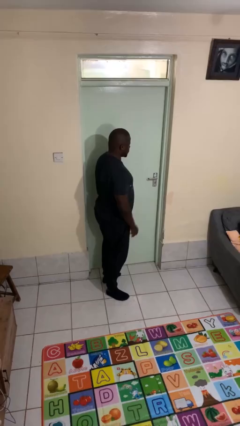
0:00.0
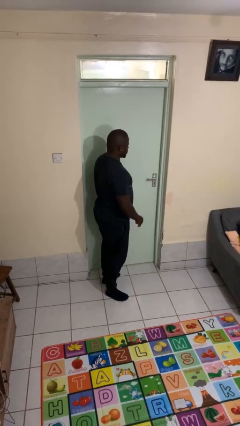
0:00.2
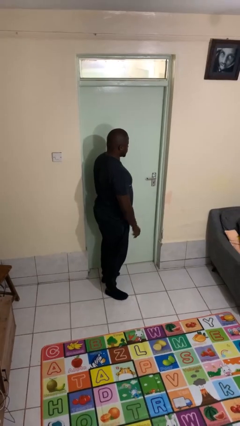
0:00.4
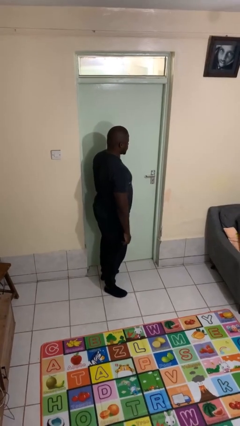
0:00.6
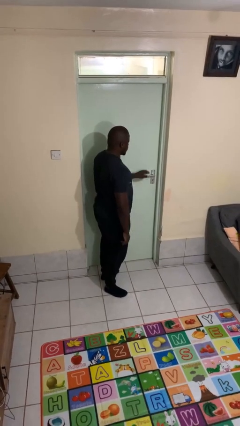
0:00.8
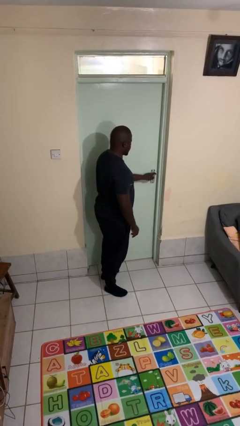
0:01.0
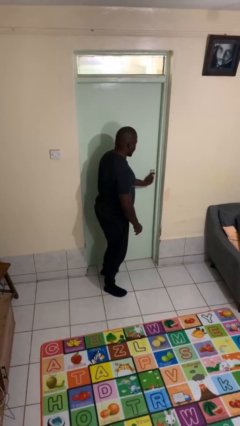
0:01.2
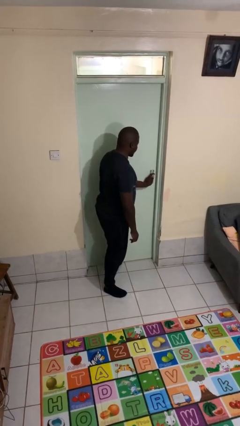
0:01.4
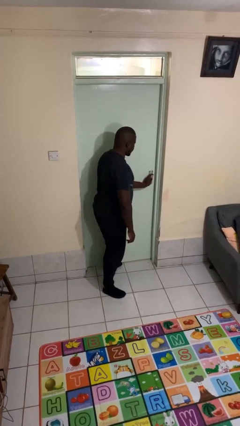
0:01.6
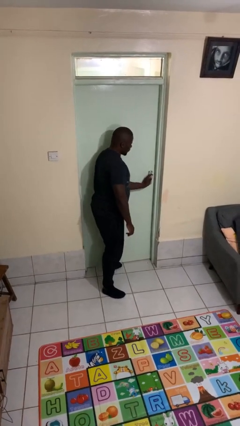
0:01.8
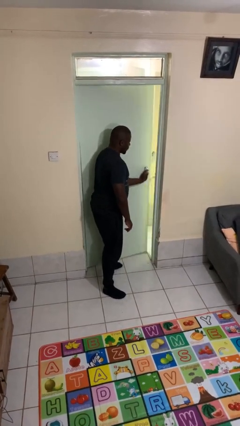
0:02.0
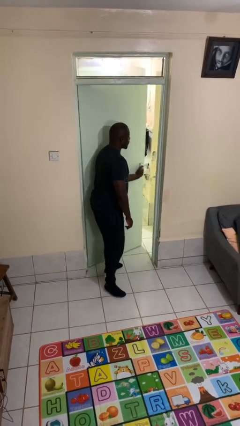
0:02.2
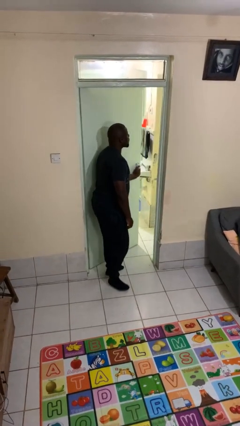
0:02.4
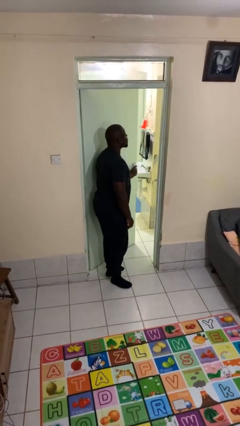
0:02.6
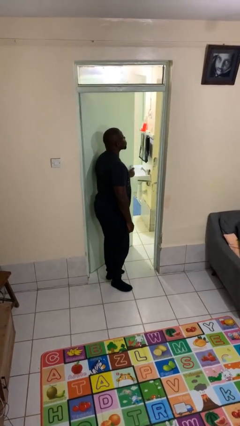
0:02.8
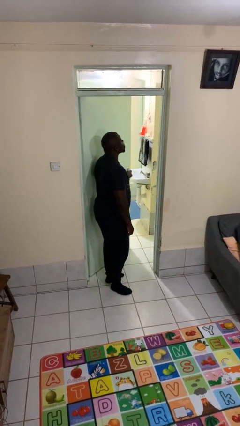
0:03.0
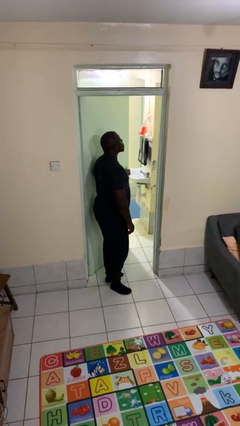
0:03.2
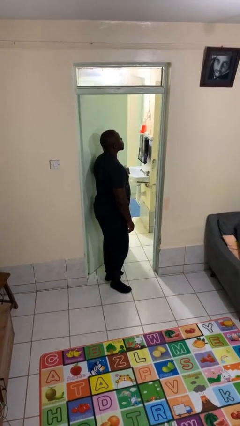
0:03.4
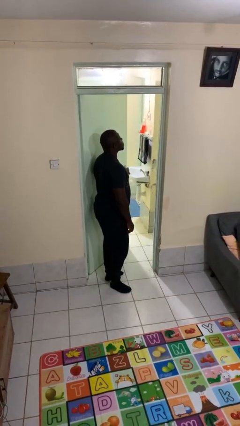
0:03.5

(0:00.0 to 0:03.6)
person opens facility door

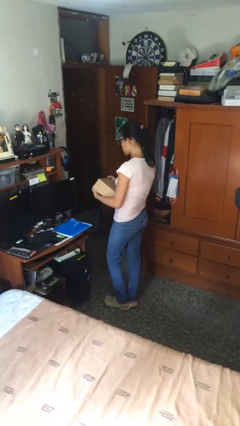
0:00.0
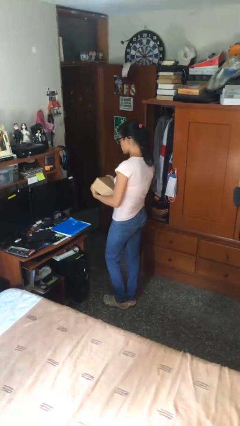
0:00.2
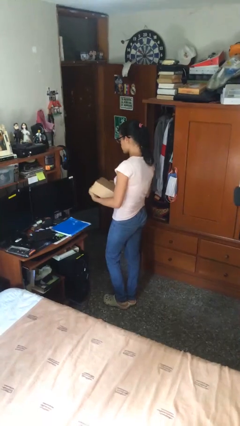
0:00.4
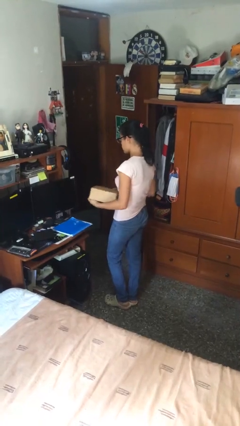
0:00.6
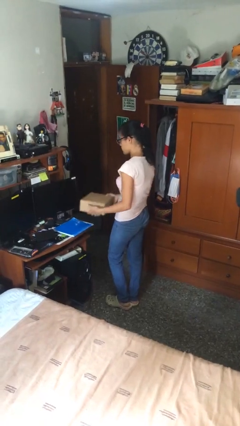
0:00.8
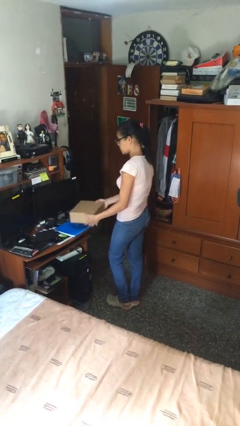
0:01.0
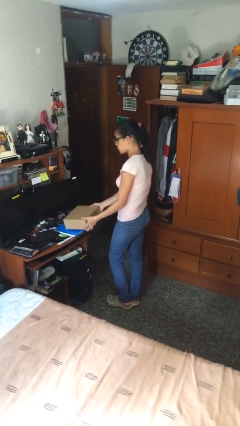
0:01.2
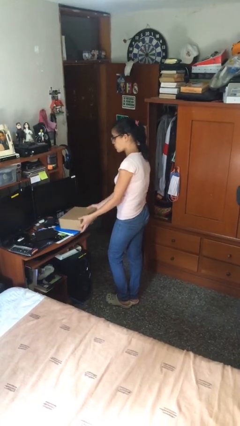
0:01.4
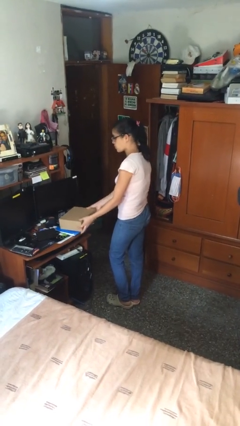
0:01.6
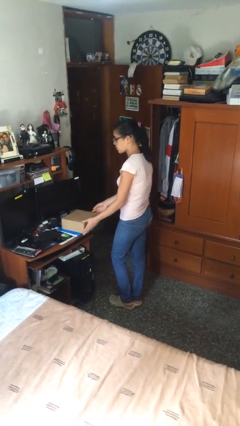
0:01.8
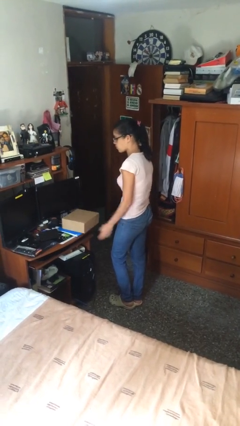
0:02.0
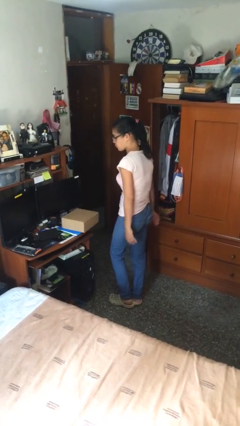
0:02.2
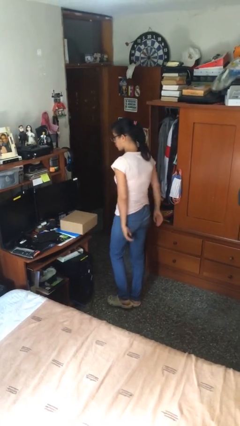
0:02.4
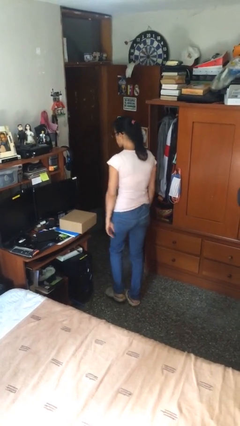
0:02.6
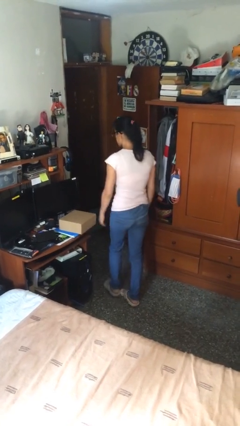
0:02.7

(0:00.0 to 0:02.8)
person puts down object on table

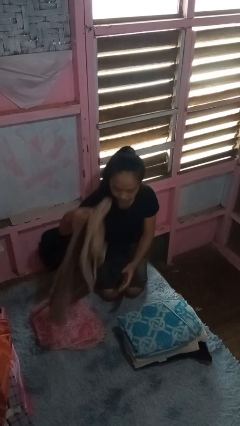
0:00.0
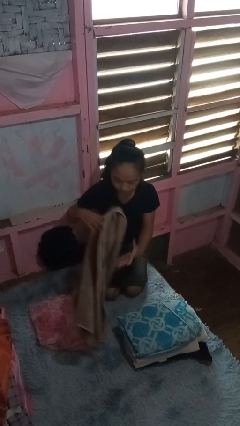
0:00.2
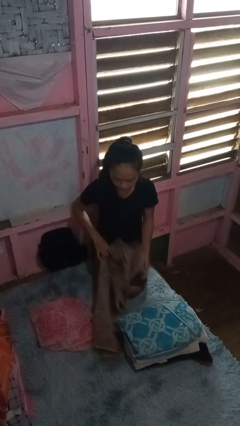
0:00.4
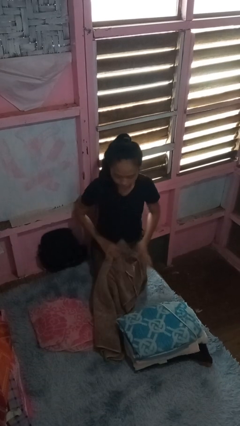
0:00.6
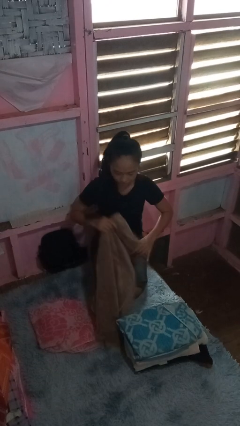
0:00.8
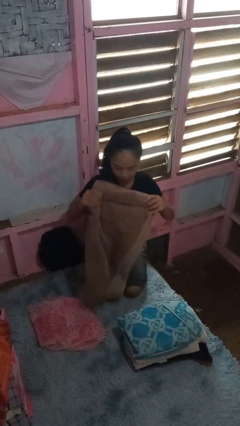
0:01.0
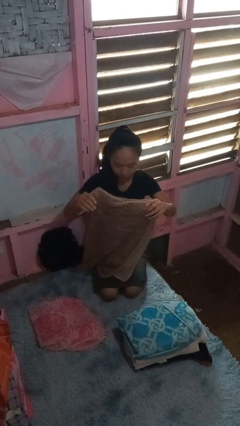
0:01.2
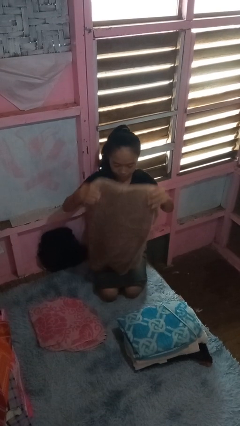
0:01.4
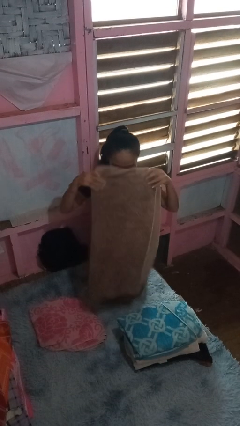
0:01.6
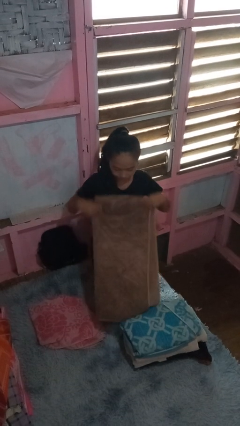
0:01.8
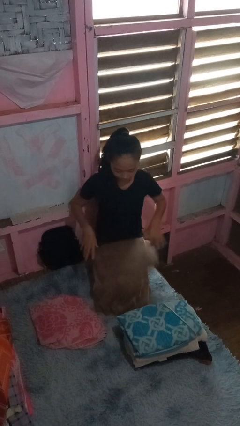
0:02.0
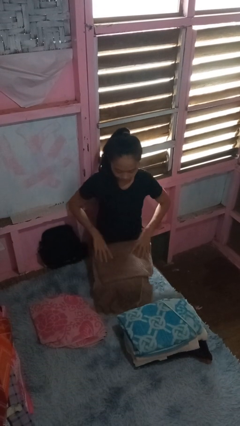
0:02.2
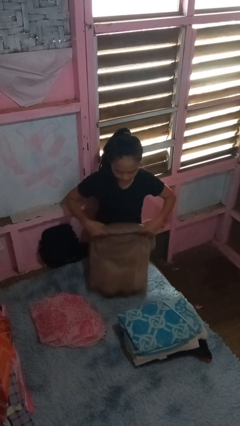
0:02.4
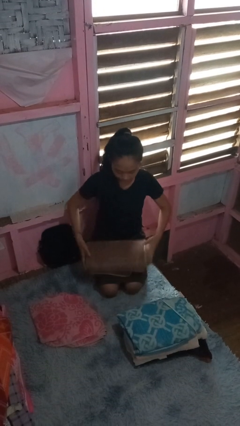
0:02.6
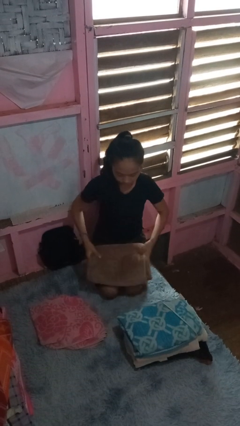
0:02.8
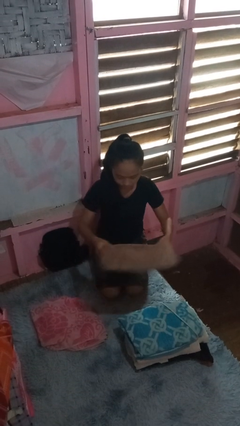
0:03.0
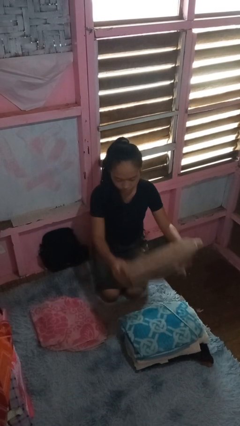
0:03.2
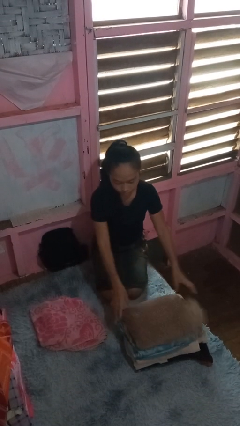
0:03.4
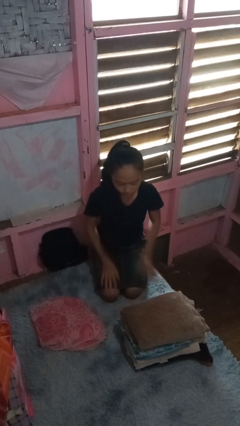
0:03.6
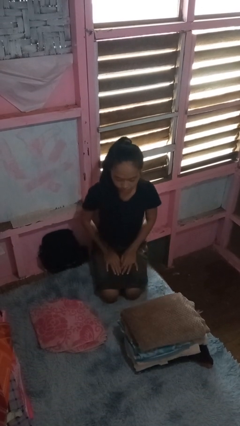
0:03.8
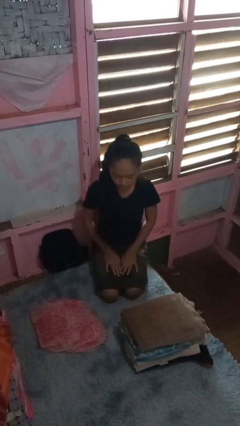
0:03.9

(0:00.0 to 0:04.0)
person folds towel

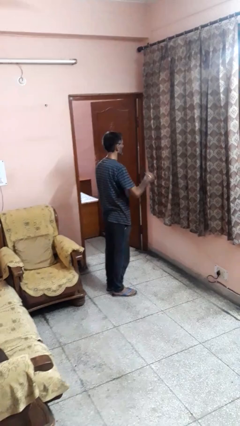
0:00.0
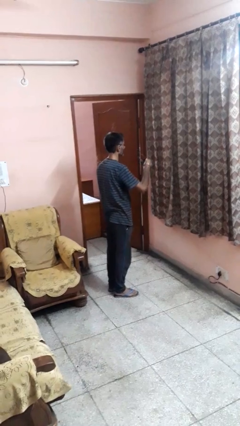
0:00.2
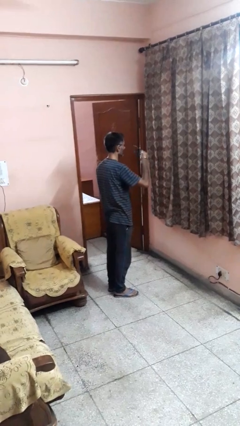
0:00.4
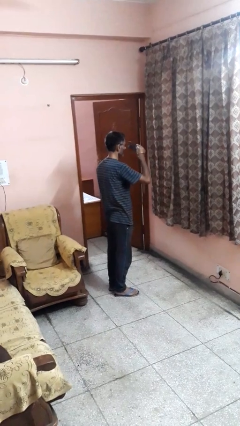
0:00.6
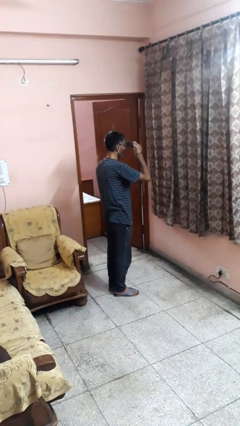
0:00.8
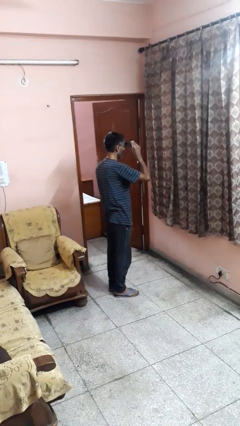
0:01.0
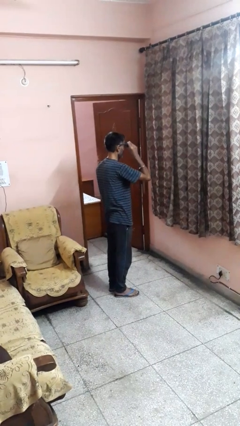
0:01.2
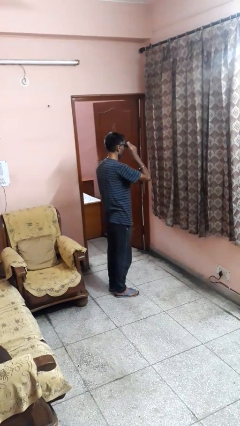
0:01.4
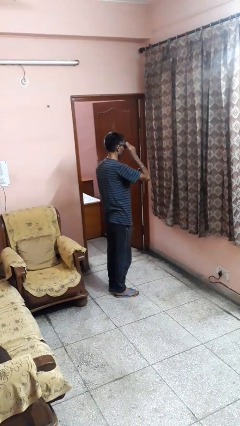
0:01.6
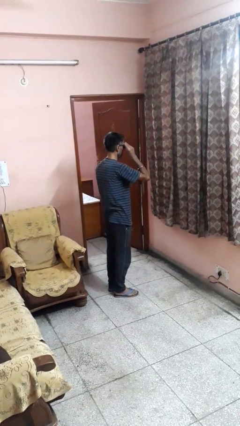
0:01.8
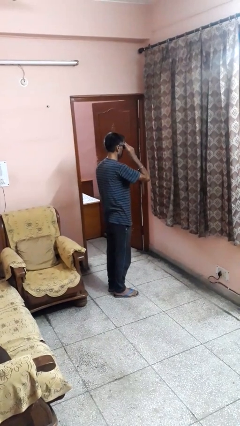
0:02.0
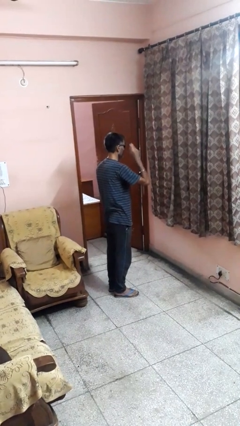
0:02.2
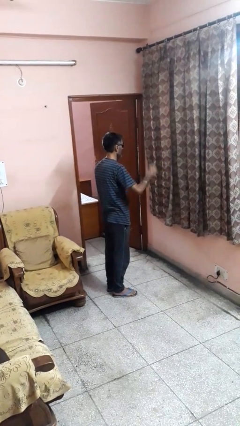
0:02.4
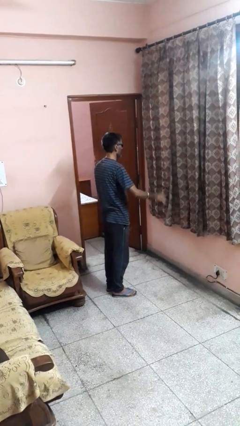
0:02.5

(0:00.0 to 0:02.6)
person puts on sunglasses

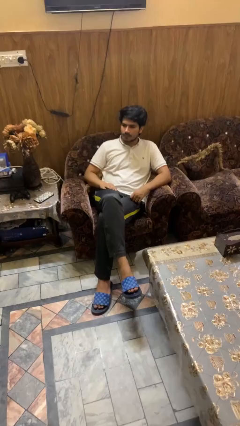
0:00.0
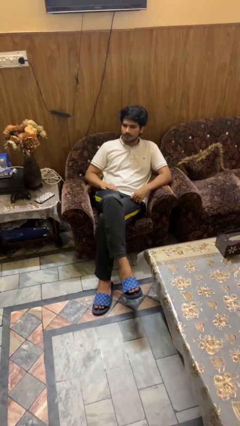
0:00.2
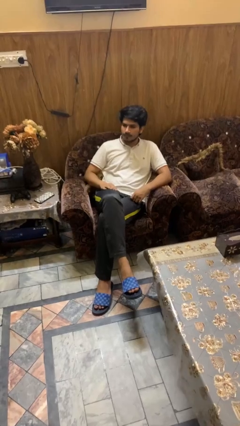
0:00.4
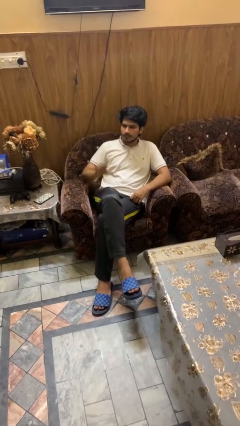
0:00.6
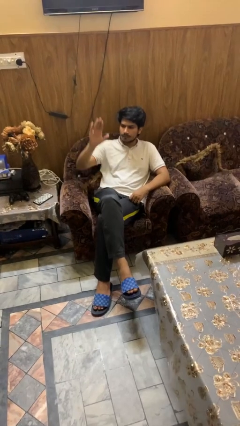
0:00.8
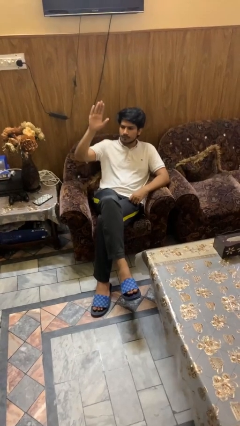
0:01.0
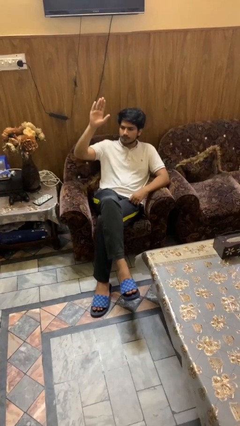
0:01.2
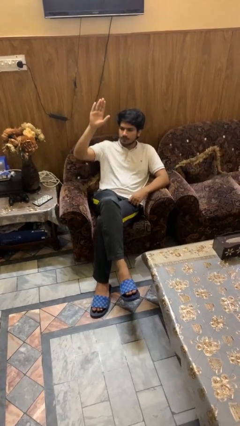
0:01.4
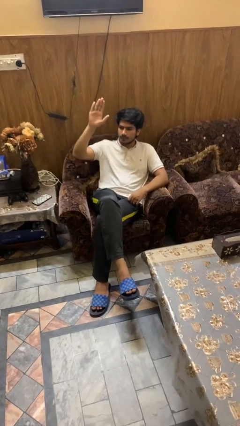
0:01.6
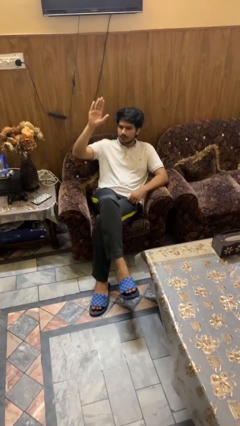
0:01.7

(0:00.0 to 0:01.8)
person gestures raise hand

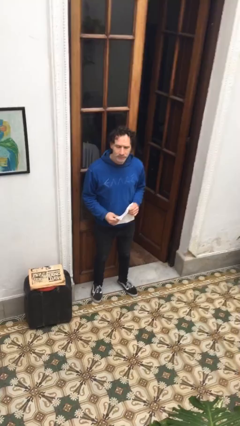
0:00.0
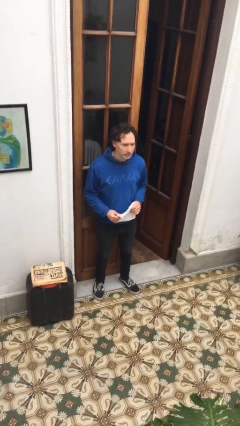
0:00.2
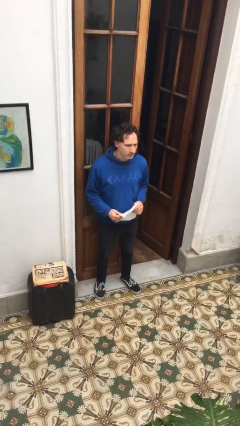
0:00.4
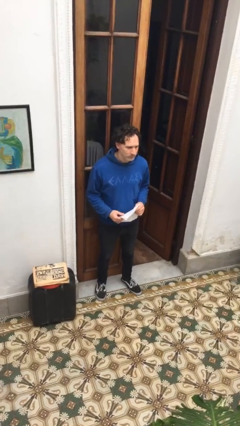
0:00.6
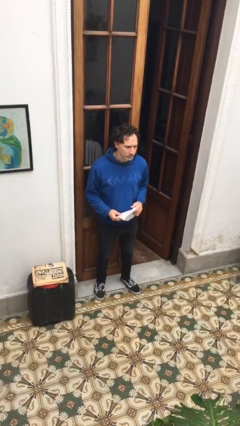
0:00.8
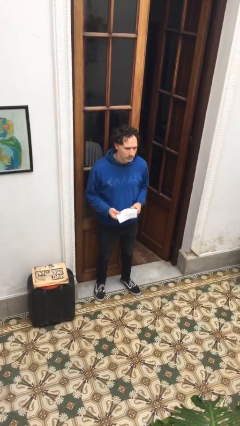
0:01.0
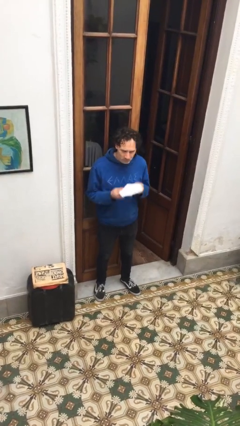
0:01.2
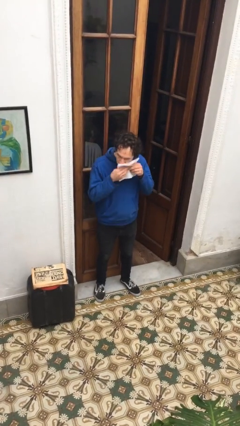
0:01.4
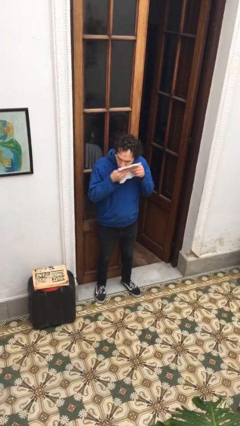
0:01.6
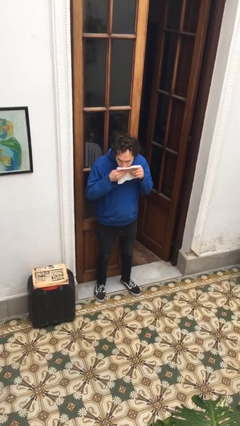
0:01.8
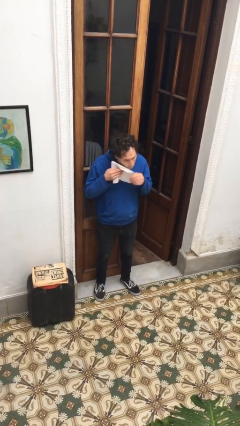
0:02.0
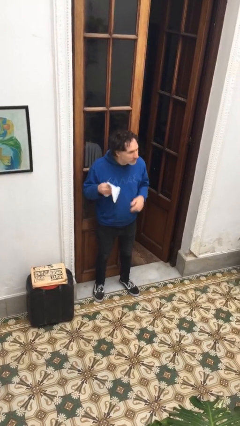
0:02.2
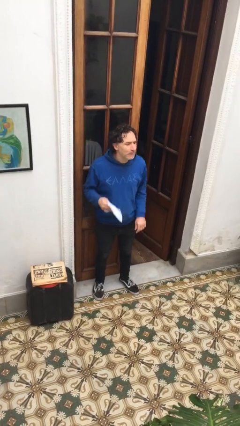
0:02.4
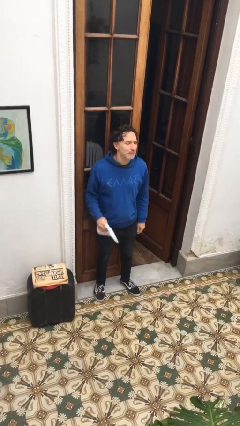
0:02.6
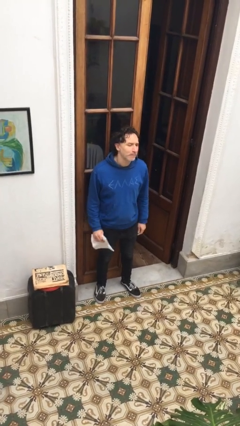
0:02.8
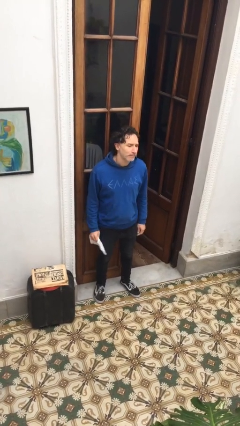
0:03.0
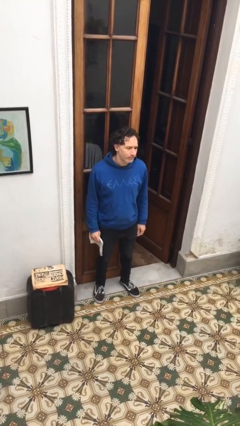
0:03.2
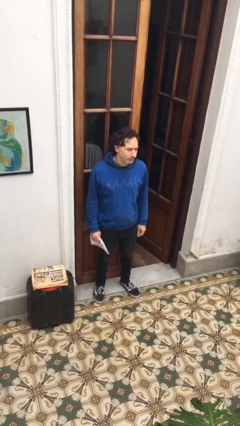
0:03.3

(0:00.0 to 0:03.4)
person wipes mouth with napkin
